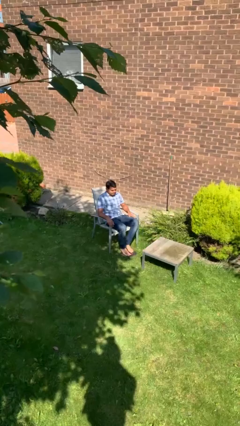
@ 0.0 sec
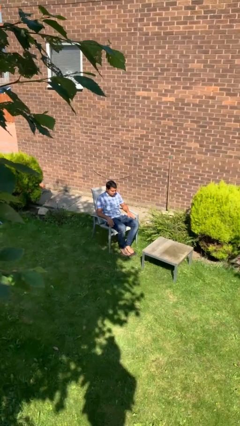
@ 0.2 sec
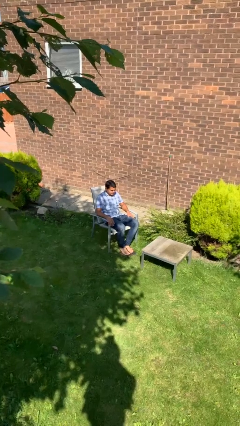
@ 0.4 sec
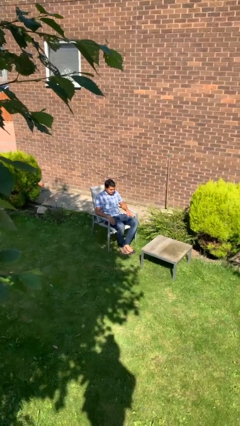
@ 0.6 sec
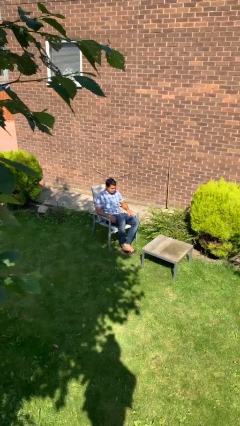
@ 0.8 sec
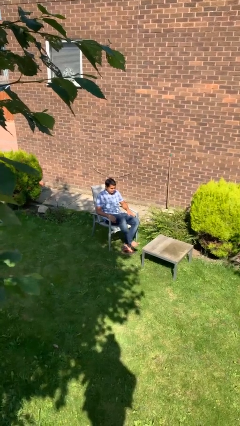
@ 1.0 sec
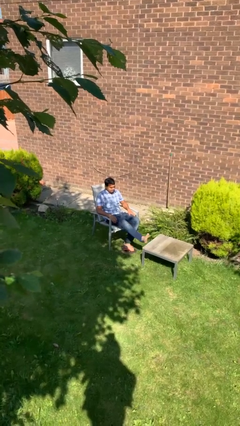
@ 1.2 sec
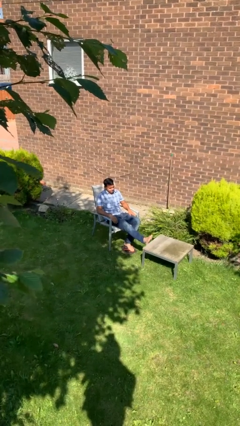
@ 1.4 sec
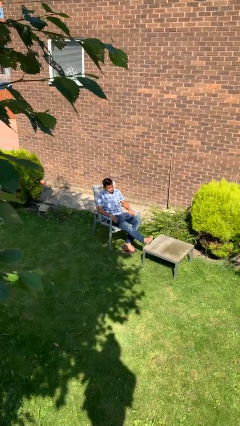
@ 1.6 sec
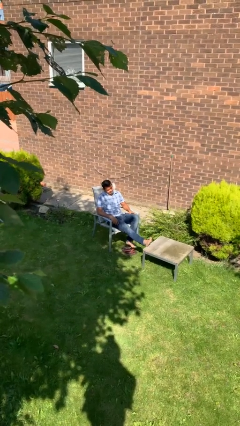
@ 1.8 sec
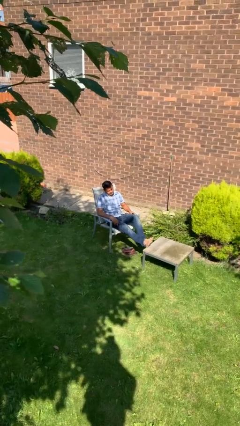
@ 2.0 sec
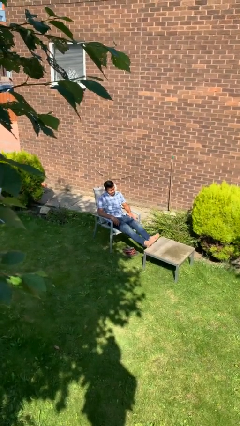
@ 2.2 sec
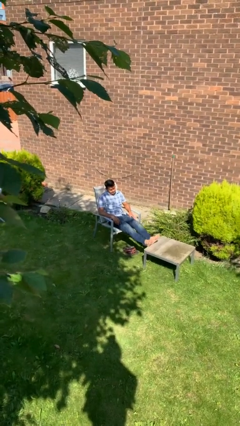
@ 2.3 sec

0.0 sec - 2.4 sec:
person puts feet up

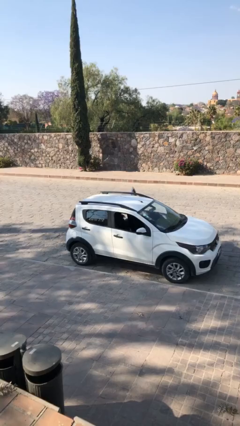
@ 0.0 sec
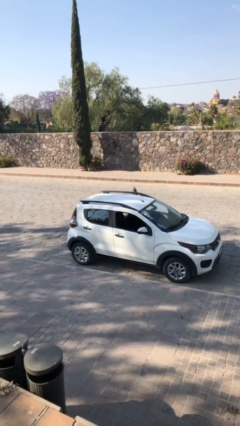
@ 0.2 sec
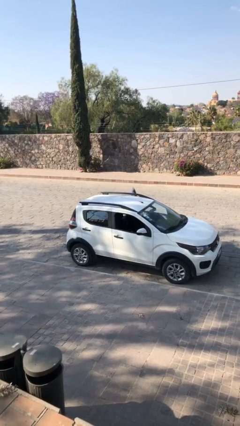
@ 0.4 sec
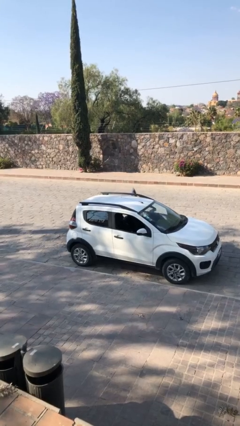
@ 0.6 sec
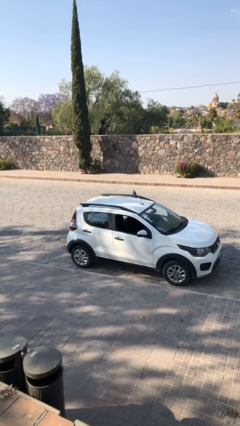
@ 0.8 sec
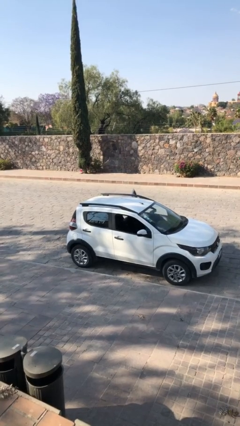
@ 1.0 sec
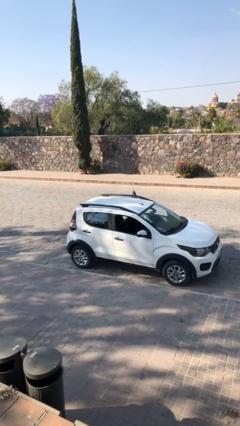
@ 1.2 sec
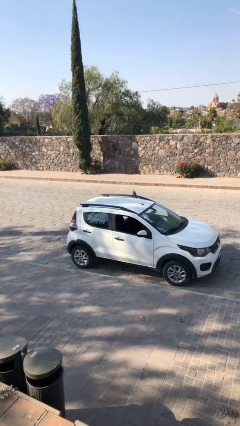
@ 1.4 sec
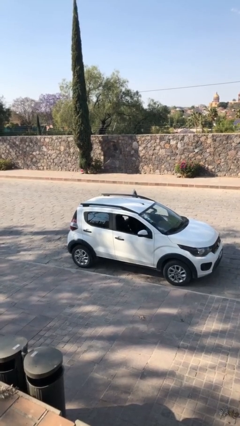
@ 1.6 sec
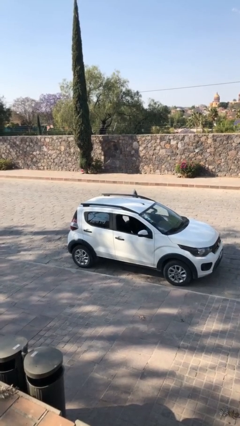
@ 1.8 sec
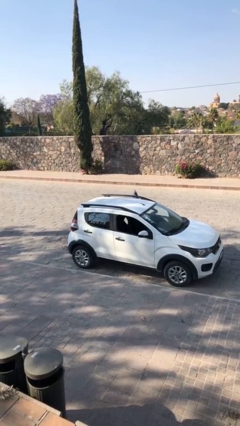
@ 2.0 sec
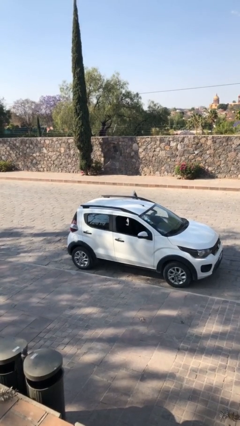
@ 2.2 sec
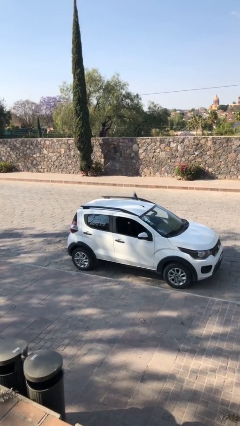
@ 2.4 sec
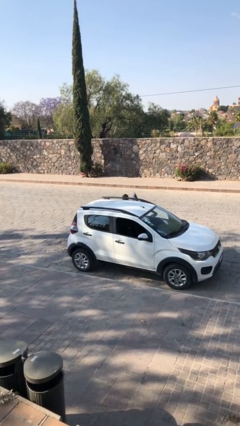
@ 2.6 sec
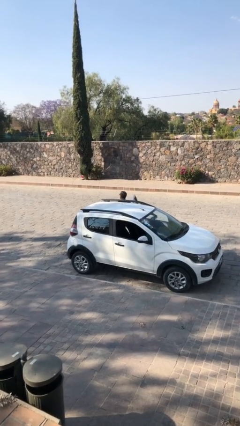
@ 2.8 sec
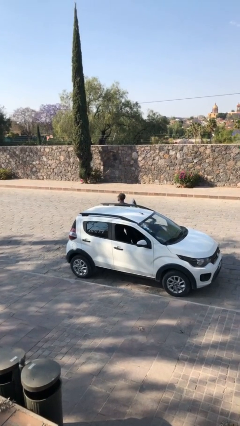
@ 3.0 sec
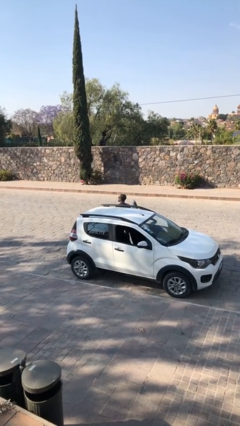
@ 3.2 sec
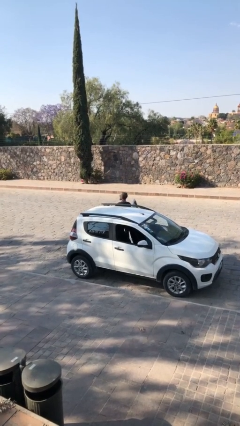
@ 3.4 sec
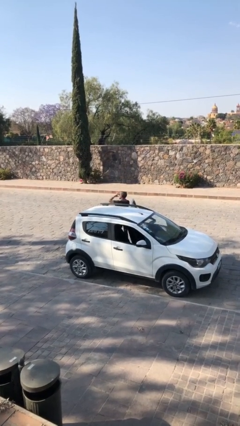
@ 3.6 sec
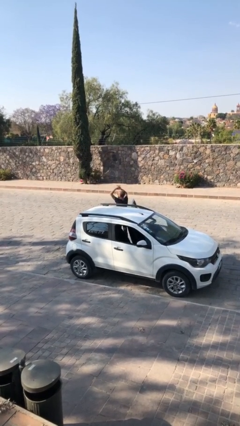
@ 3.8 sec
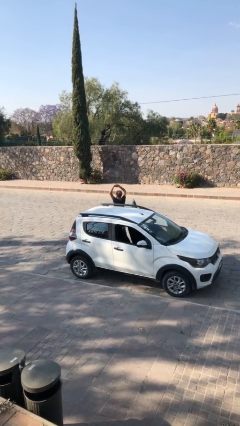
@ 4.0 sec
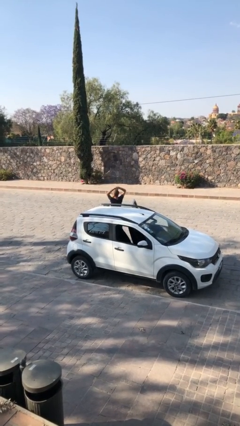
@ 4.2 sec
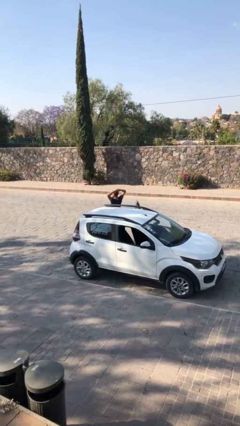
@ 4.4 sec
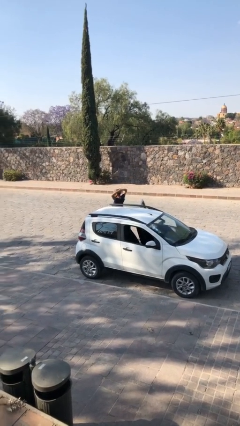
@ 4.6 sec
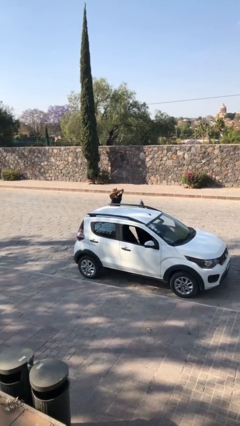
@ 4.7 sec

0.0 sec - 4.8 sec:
person exits car

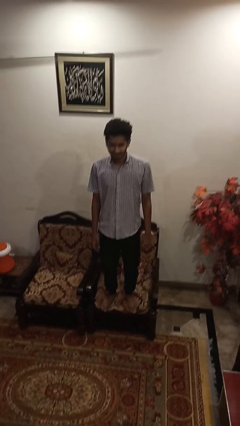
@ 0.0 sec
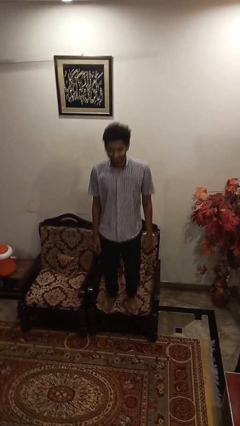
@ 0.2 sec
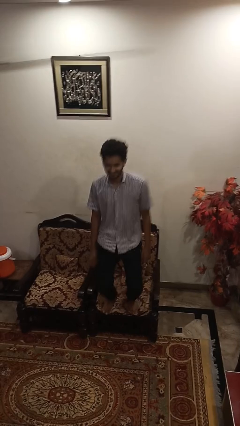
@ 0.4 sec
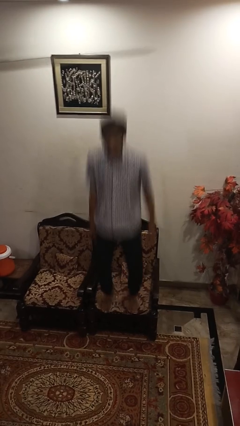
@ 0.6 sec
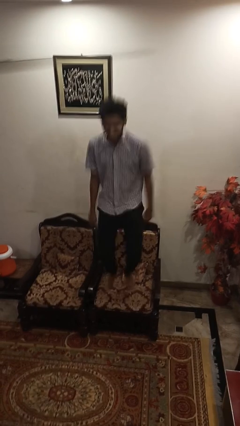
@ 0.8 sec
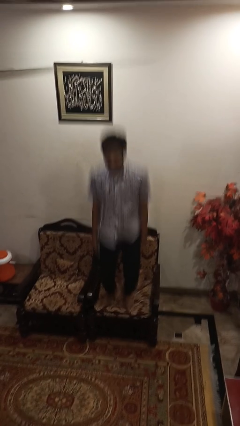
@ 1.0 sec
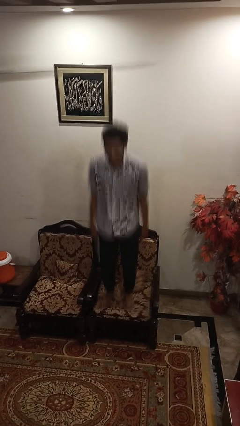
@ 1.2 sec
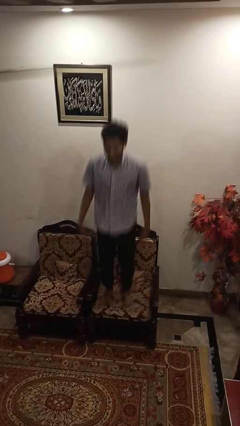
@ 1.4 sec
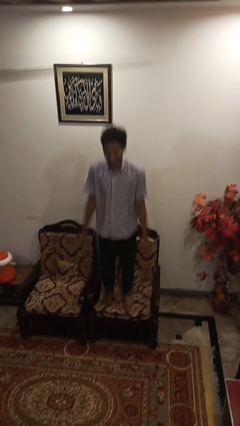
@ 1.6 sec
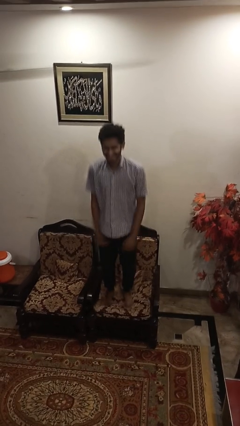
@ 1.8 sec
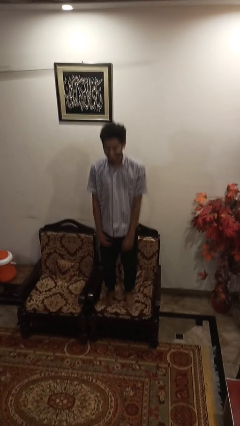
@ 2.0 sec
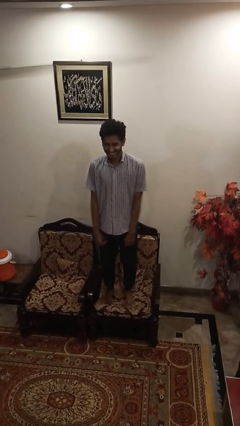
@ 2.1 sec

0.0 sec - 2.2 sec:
person jumps on couch

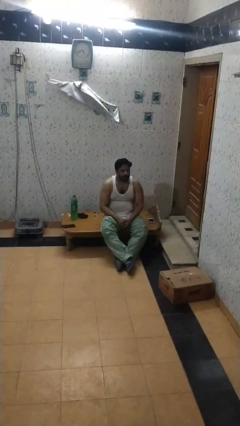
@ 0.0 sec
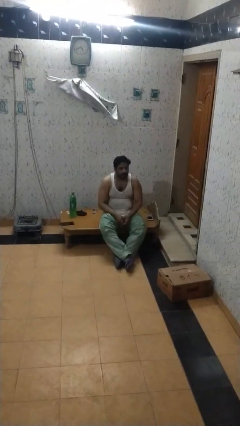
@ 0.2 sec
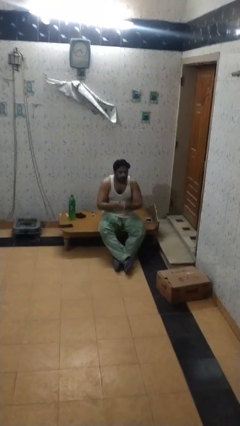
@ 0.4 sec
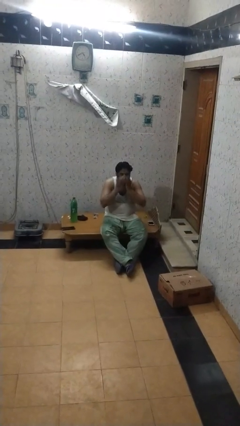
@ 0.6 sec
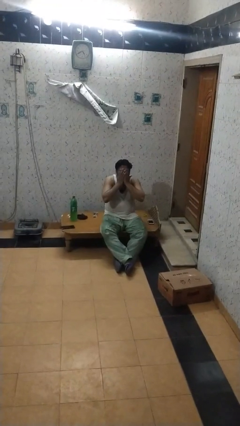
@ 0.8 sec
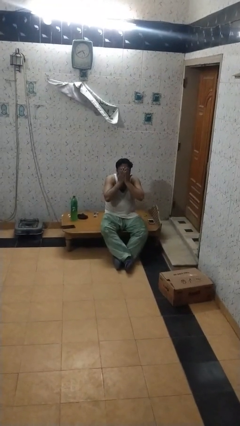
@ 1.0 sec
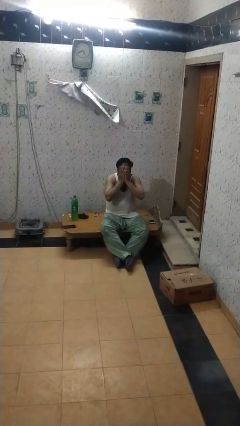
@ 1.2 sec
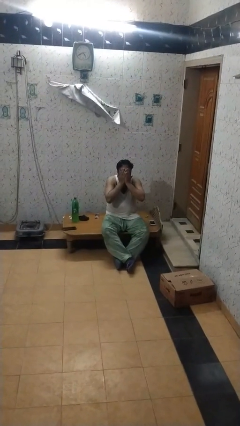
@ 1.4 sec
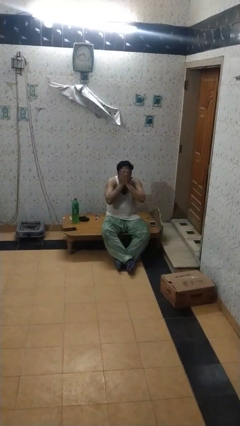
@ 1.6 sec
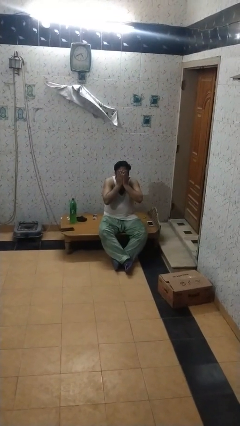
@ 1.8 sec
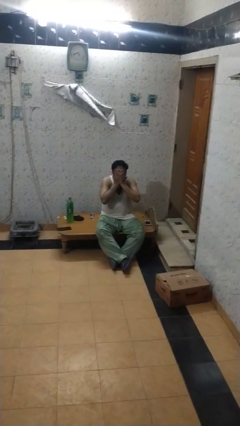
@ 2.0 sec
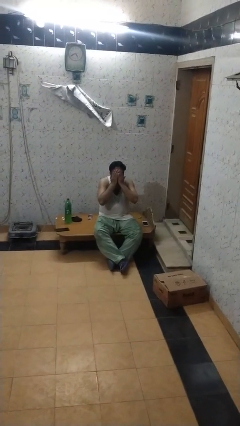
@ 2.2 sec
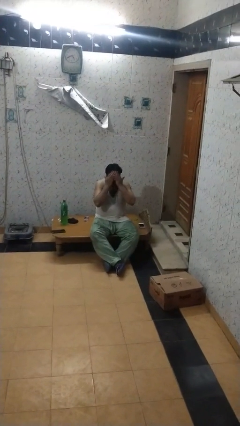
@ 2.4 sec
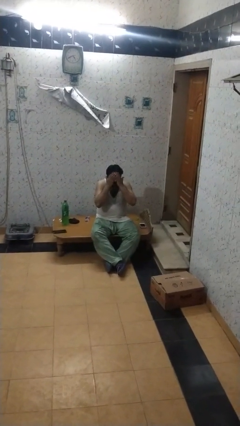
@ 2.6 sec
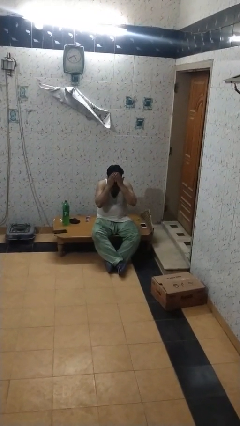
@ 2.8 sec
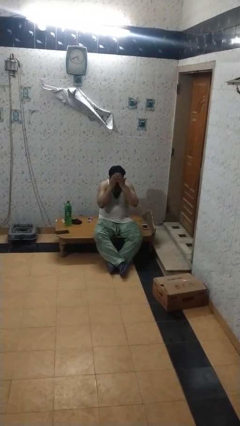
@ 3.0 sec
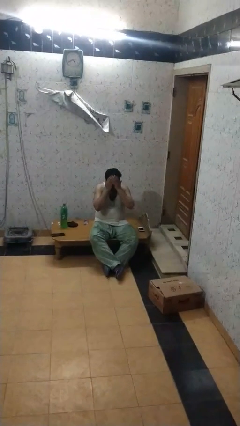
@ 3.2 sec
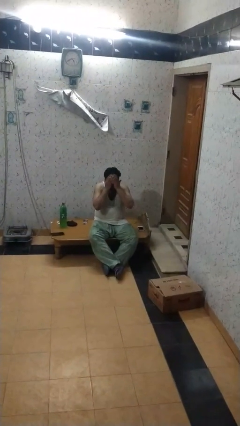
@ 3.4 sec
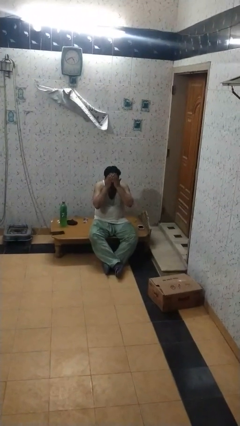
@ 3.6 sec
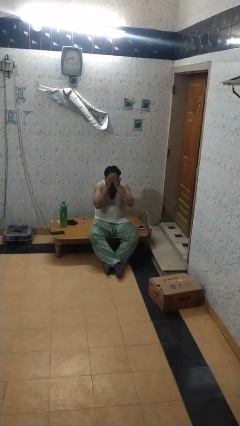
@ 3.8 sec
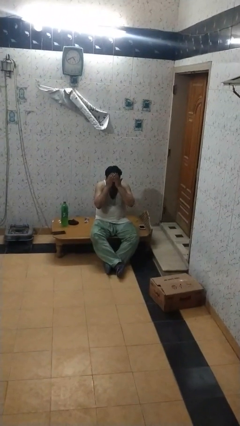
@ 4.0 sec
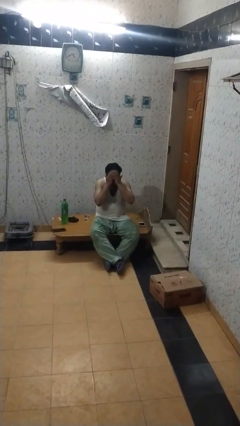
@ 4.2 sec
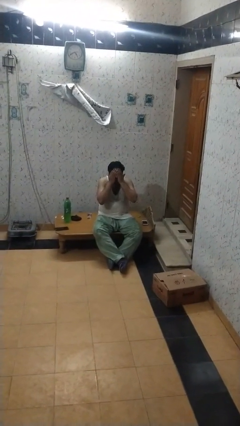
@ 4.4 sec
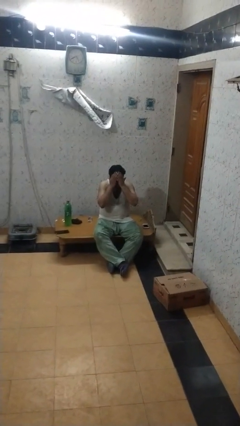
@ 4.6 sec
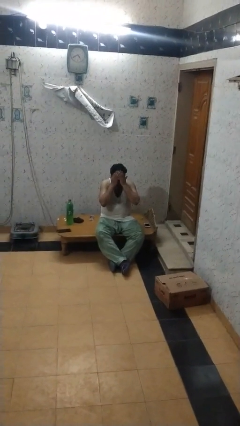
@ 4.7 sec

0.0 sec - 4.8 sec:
person covers face with hands

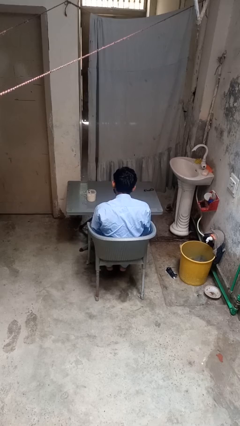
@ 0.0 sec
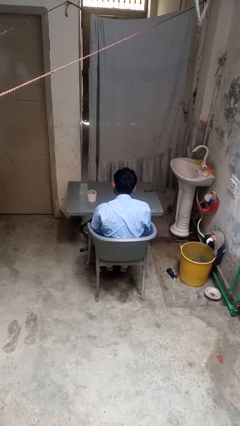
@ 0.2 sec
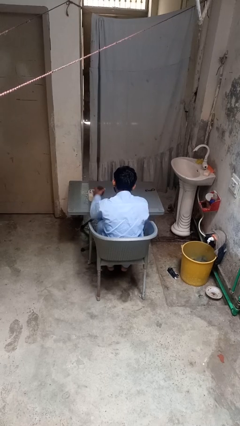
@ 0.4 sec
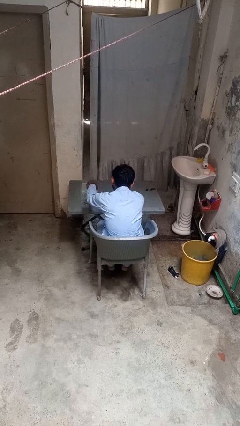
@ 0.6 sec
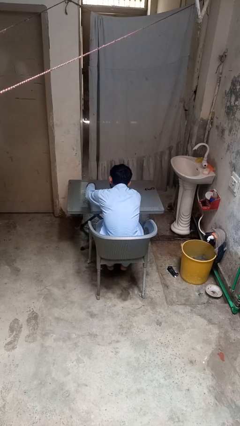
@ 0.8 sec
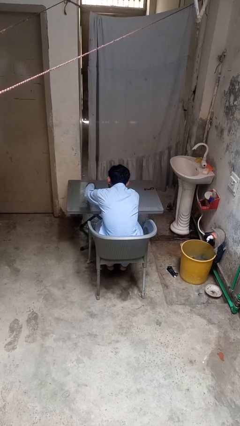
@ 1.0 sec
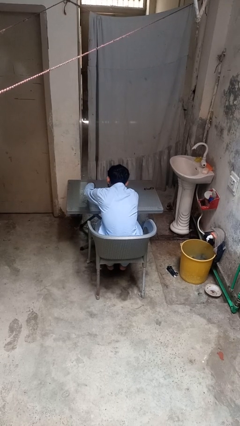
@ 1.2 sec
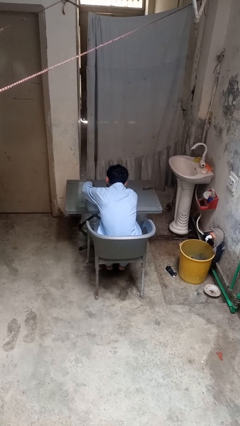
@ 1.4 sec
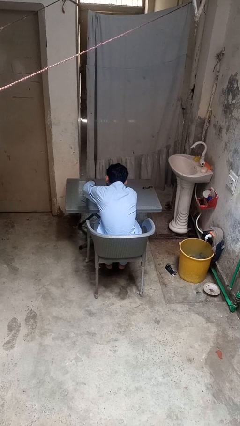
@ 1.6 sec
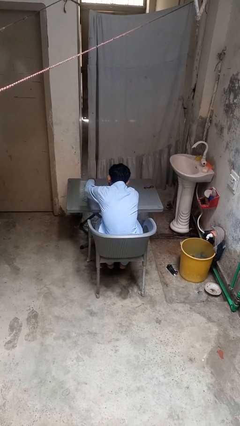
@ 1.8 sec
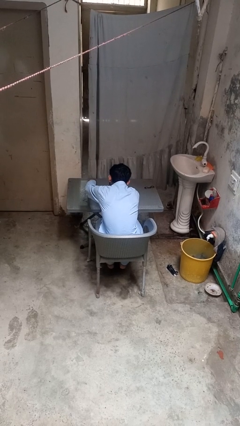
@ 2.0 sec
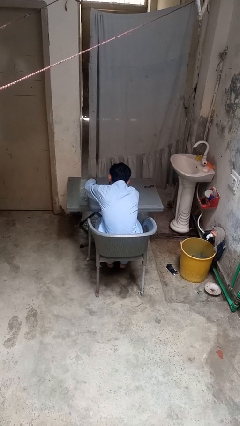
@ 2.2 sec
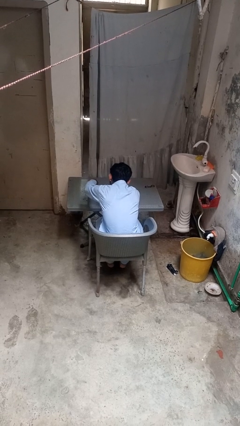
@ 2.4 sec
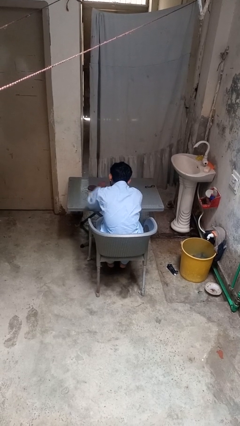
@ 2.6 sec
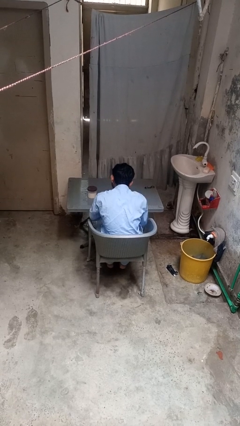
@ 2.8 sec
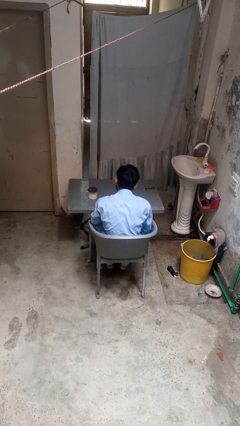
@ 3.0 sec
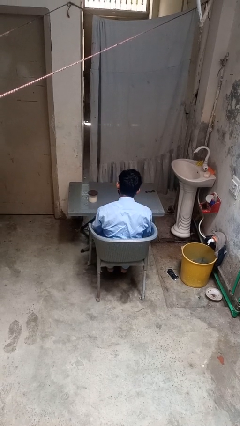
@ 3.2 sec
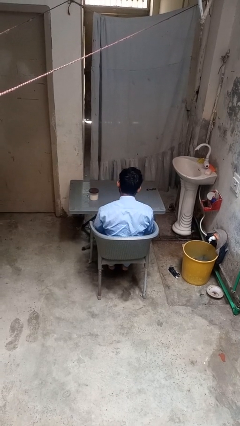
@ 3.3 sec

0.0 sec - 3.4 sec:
person closes jar
